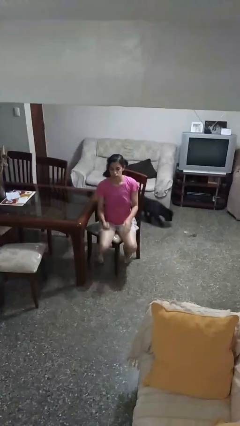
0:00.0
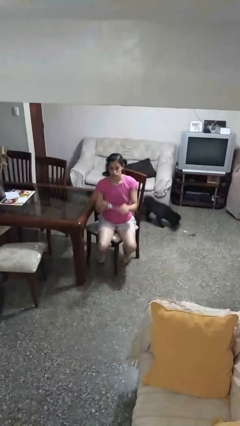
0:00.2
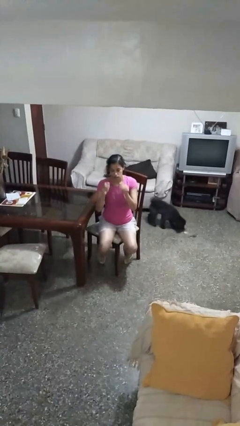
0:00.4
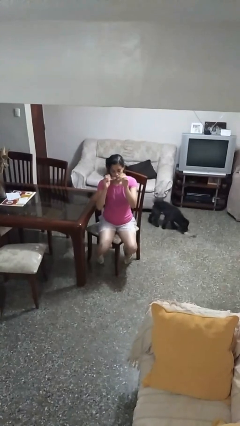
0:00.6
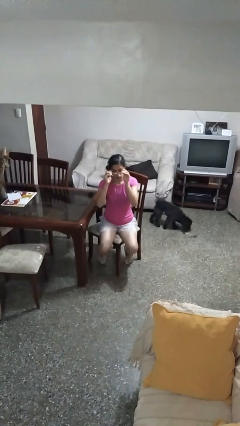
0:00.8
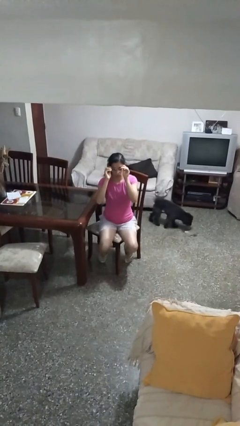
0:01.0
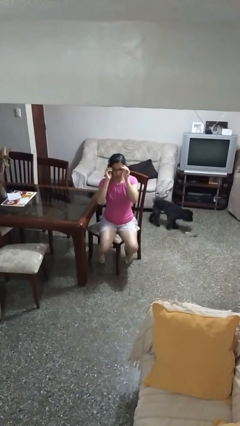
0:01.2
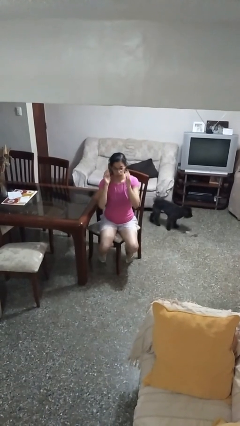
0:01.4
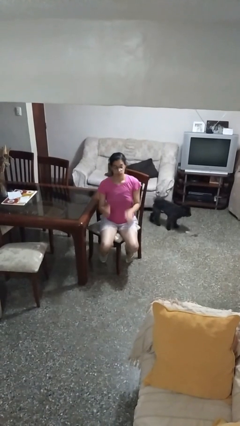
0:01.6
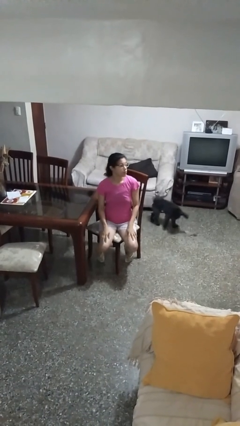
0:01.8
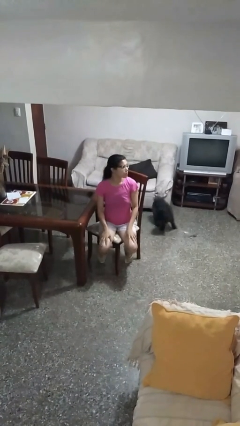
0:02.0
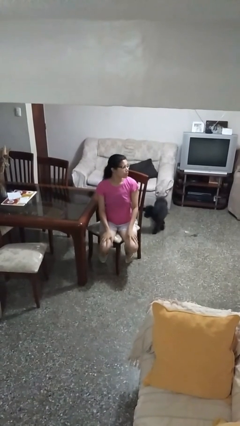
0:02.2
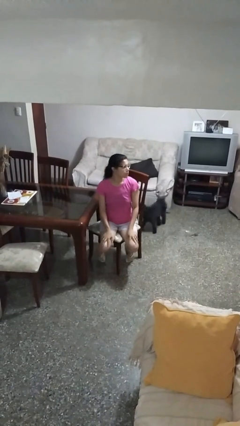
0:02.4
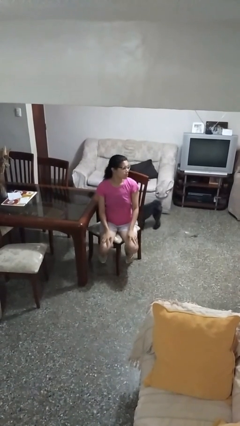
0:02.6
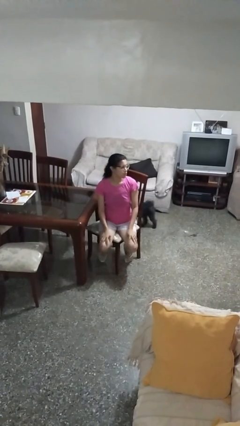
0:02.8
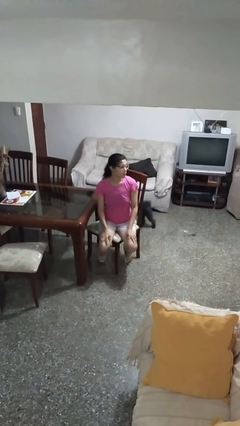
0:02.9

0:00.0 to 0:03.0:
person puts on glasses

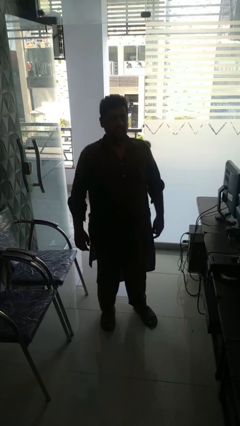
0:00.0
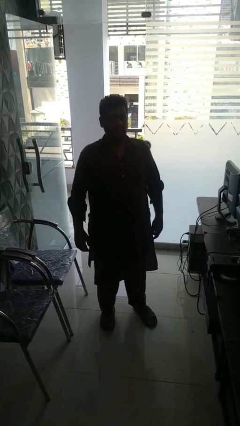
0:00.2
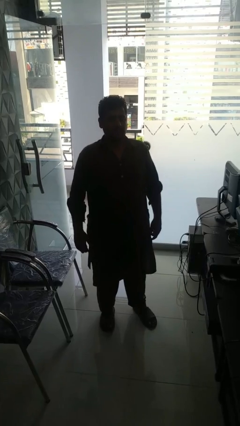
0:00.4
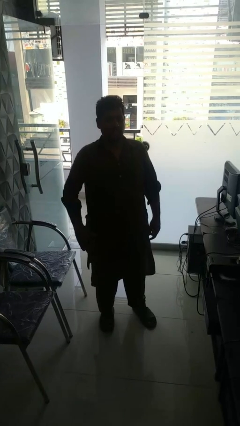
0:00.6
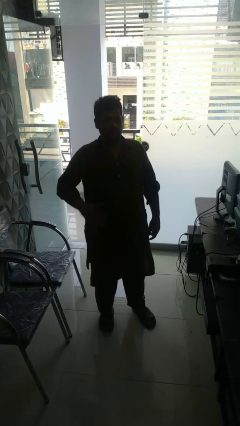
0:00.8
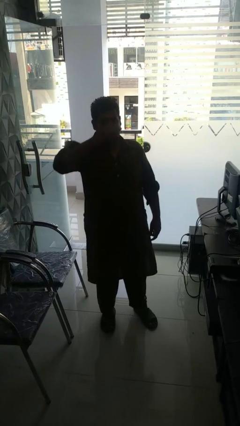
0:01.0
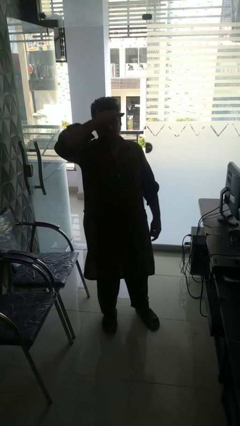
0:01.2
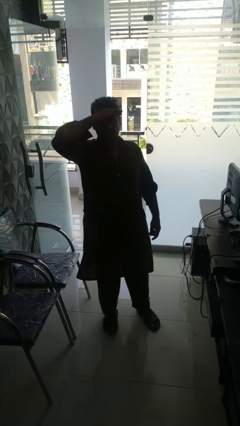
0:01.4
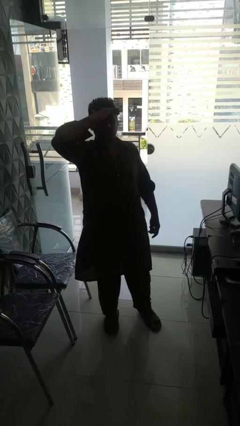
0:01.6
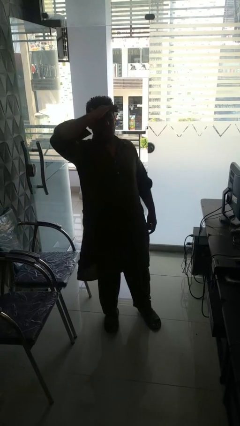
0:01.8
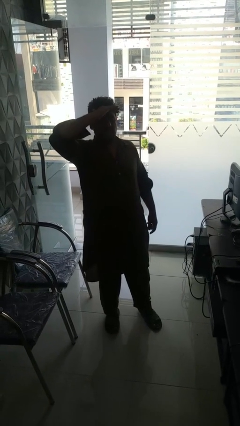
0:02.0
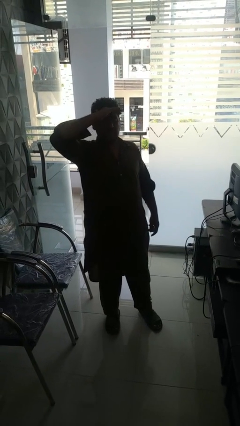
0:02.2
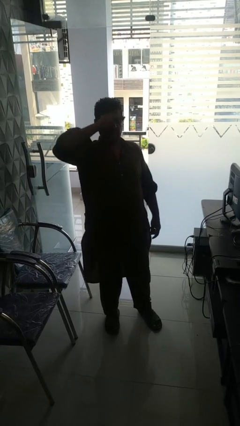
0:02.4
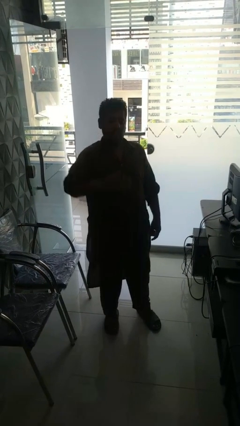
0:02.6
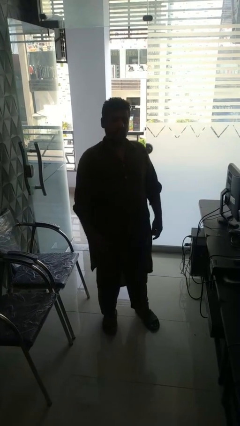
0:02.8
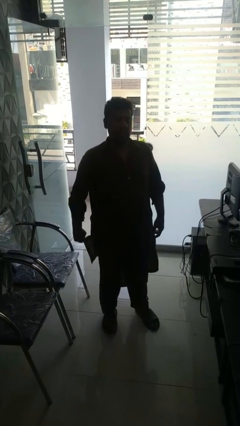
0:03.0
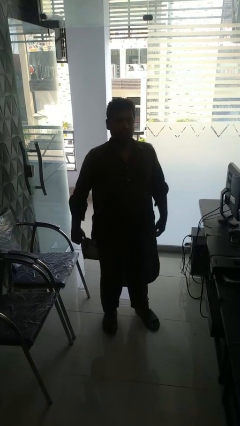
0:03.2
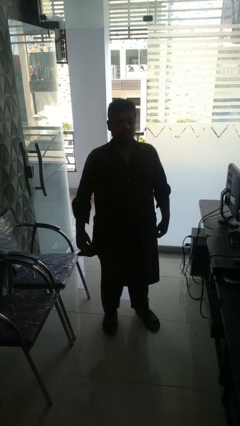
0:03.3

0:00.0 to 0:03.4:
person shades eyes

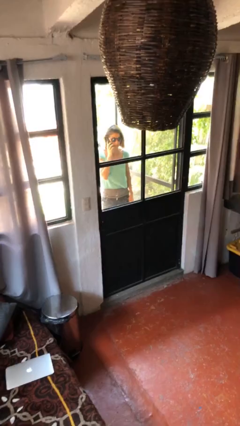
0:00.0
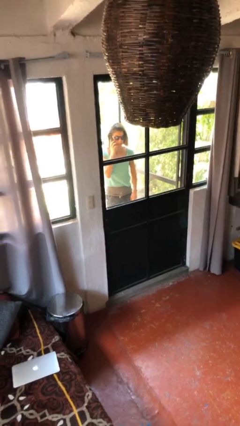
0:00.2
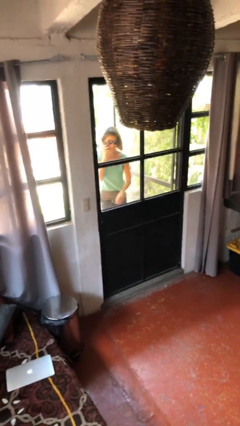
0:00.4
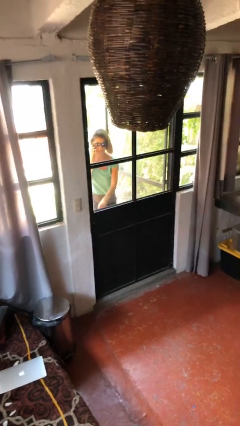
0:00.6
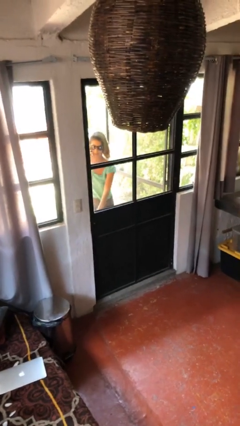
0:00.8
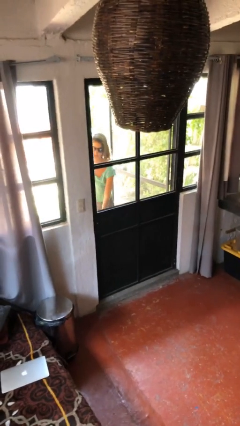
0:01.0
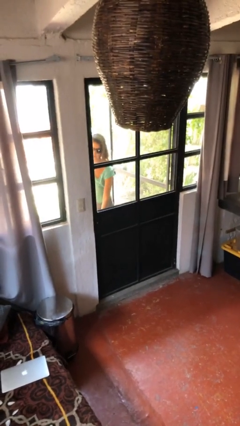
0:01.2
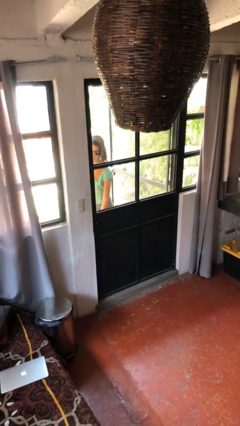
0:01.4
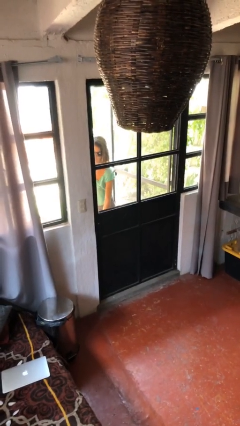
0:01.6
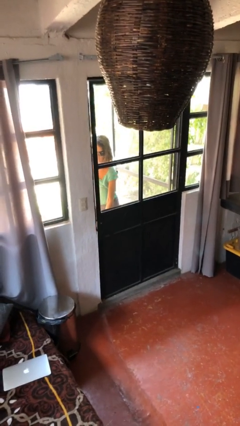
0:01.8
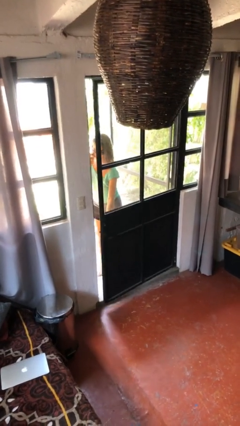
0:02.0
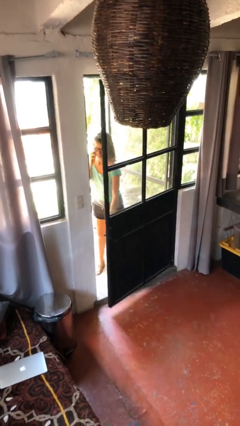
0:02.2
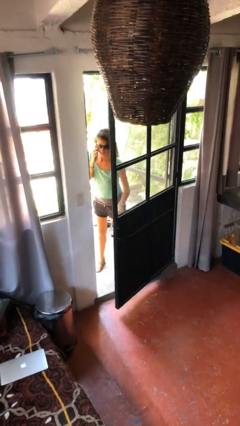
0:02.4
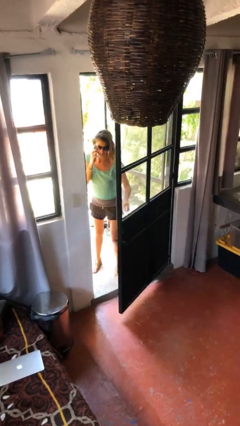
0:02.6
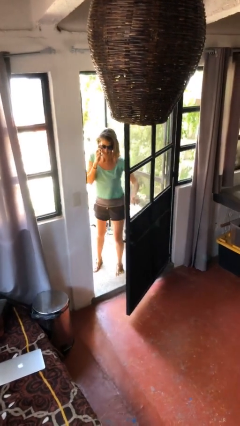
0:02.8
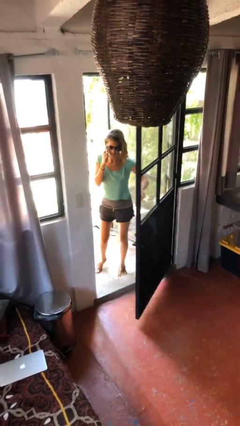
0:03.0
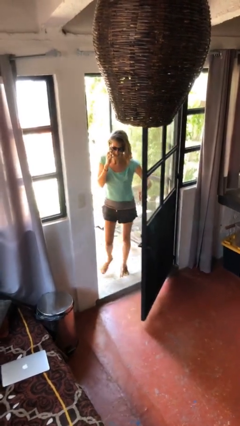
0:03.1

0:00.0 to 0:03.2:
person opens facility door

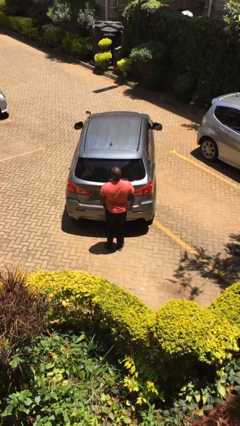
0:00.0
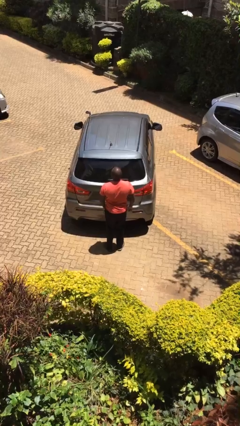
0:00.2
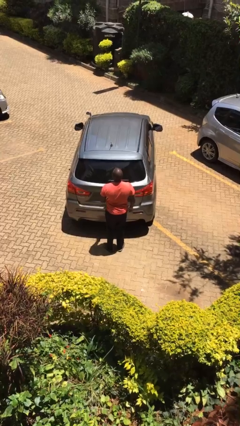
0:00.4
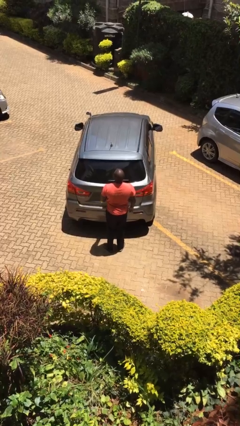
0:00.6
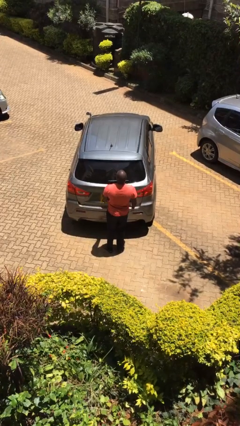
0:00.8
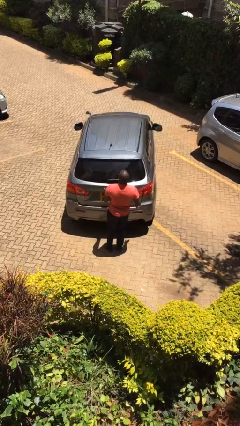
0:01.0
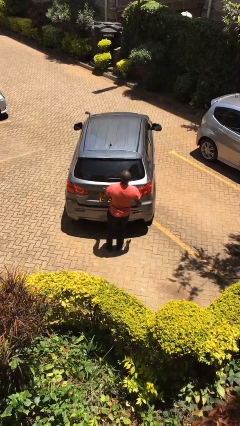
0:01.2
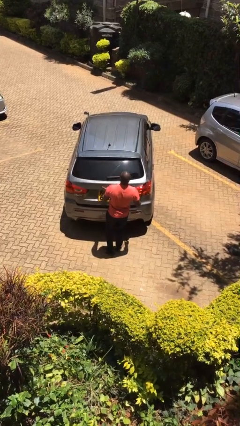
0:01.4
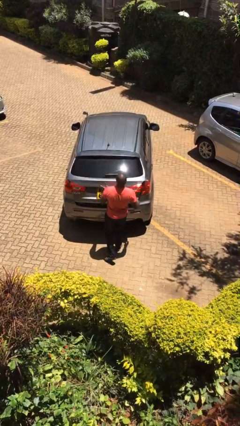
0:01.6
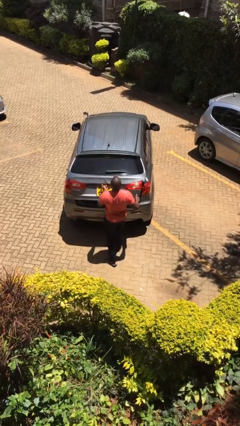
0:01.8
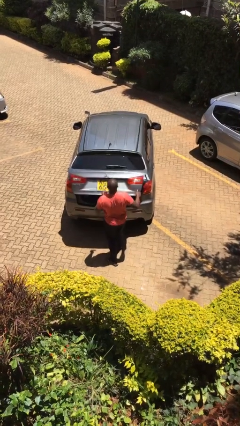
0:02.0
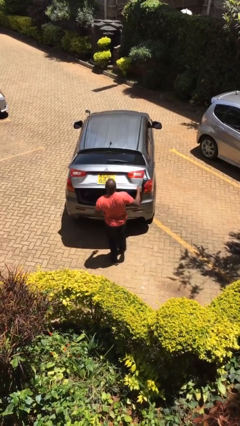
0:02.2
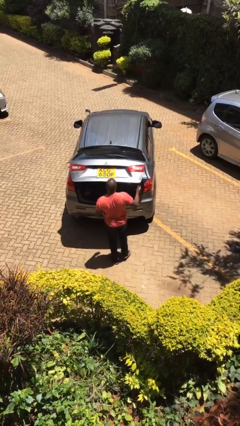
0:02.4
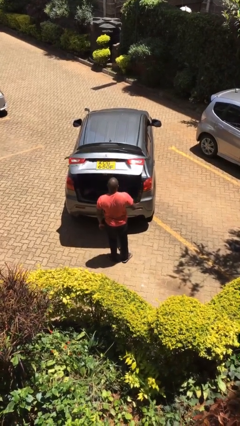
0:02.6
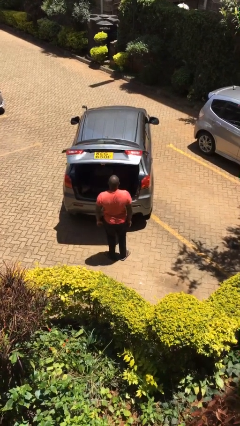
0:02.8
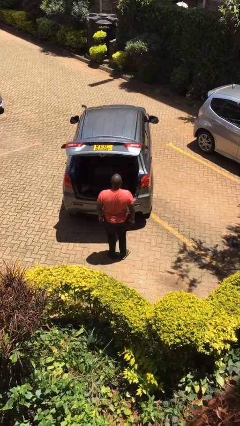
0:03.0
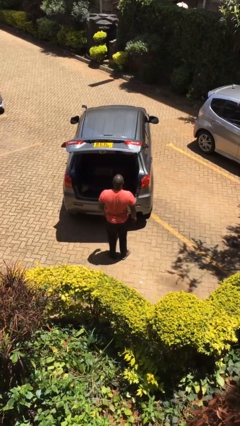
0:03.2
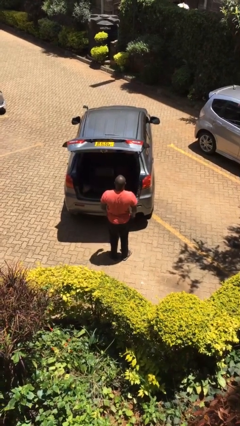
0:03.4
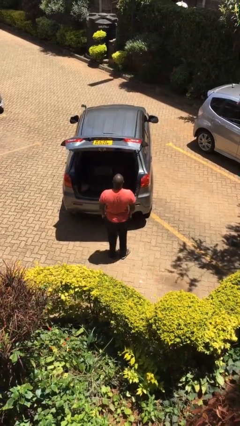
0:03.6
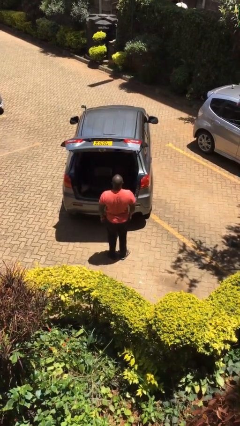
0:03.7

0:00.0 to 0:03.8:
person opens car trunk

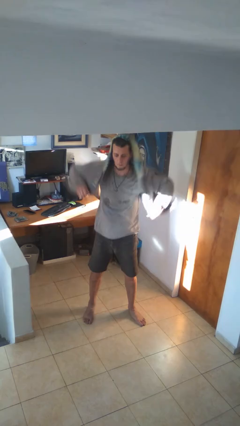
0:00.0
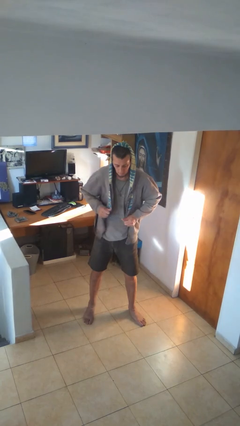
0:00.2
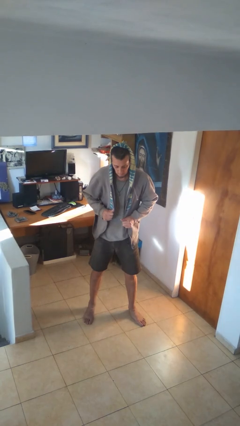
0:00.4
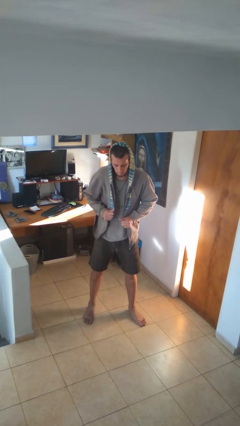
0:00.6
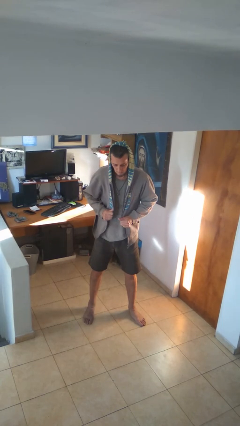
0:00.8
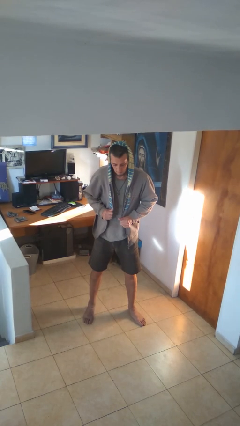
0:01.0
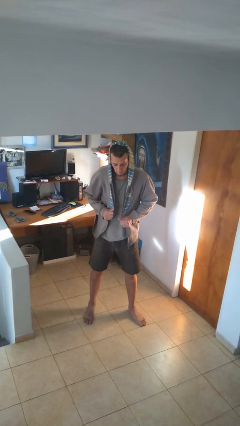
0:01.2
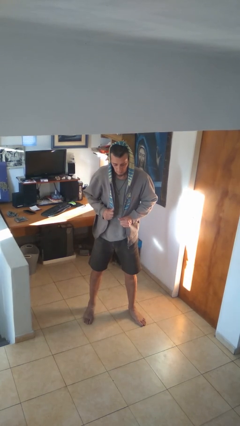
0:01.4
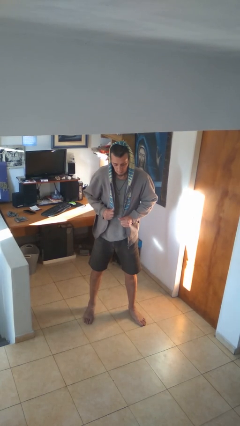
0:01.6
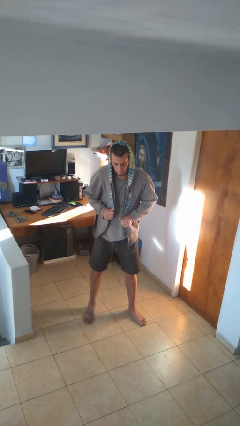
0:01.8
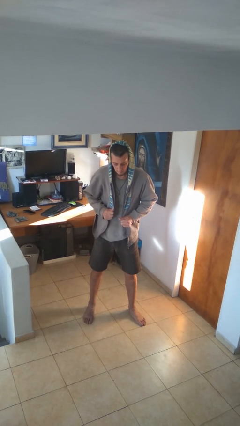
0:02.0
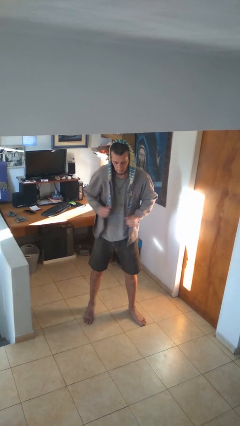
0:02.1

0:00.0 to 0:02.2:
person puts on hoodie

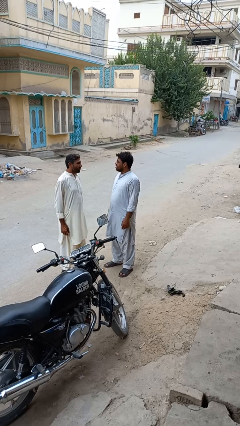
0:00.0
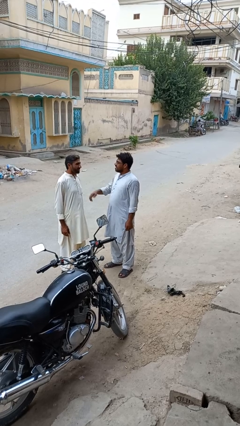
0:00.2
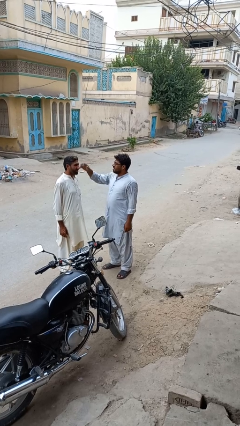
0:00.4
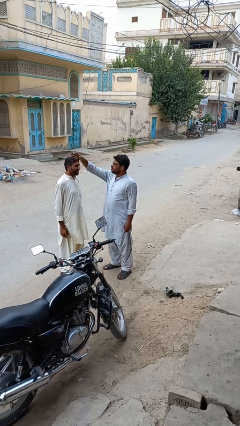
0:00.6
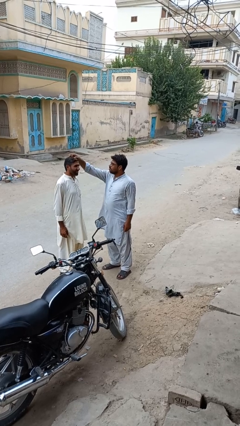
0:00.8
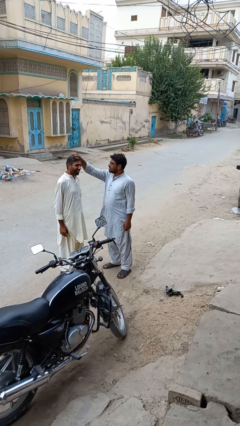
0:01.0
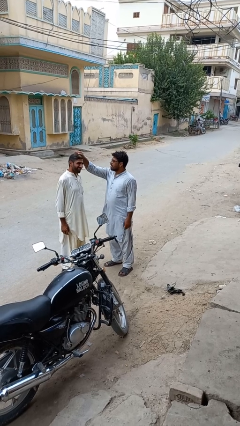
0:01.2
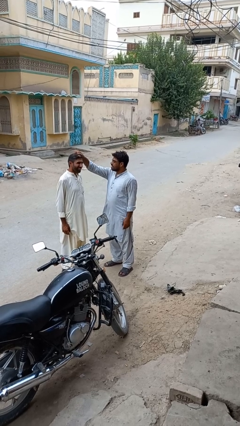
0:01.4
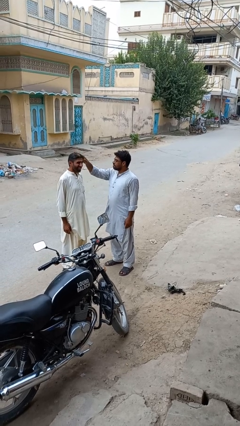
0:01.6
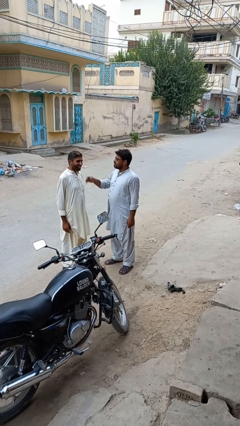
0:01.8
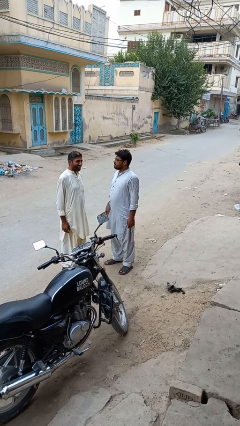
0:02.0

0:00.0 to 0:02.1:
person grabs person by hair
